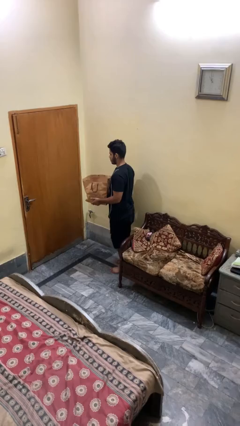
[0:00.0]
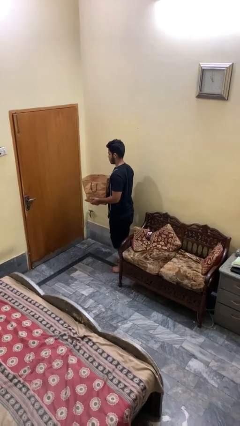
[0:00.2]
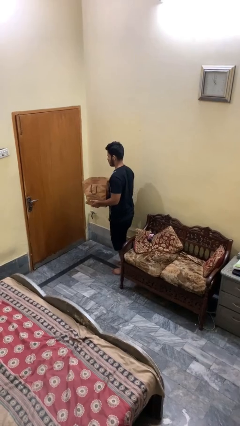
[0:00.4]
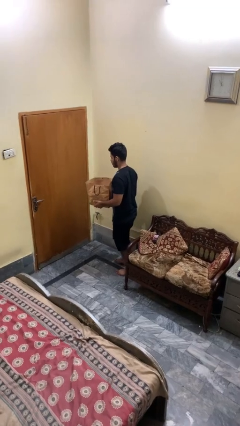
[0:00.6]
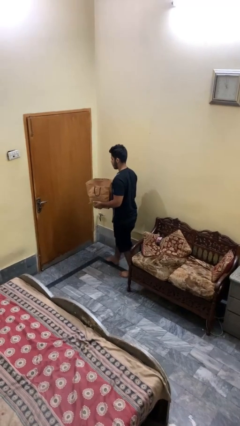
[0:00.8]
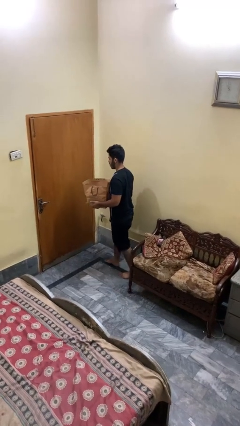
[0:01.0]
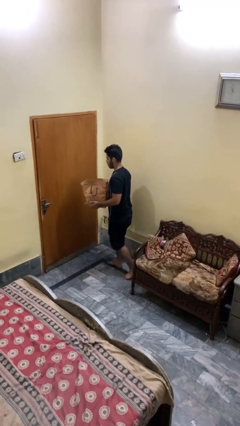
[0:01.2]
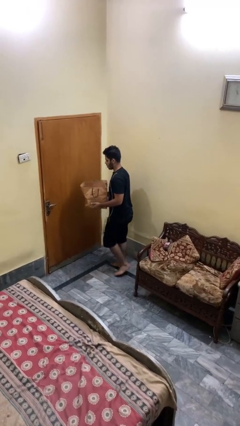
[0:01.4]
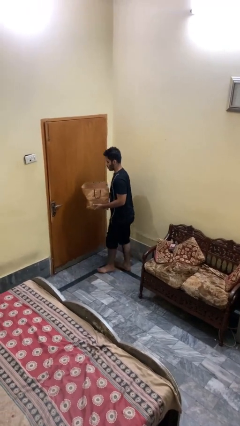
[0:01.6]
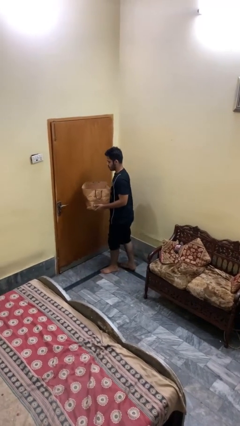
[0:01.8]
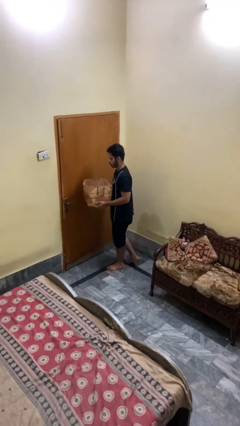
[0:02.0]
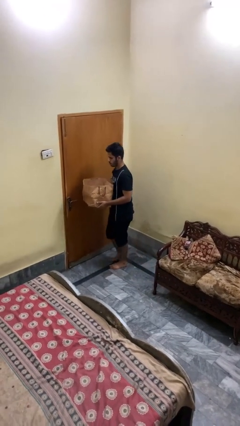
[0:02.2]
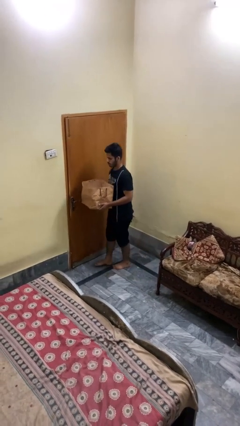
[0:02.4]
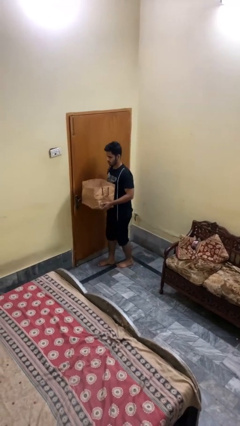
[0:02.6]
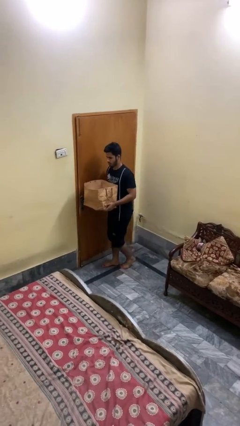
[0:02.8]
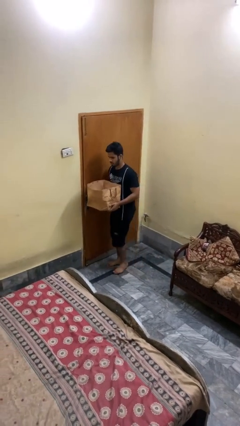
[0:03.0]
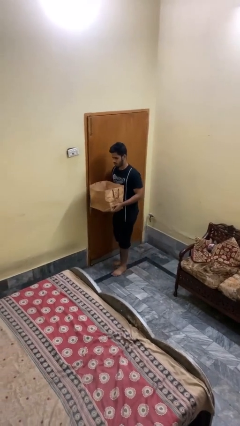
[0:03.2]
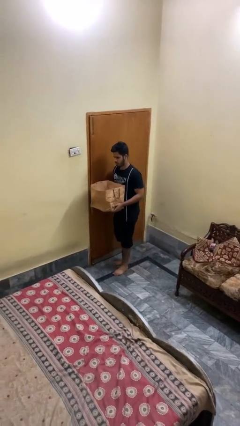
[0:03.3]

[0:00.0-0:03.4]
person carries groceries

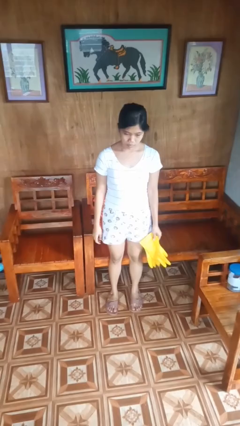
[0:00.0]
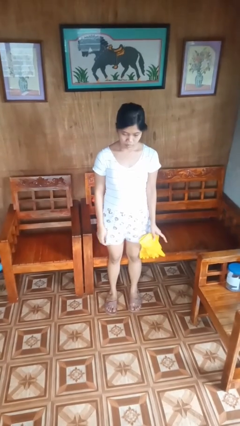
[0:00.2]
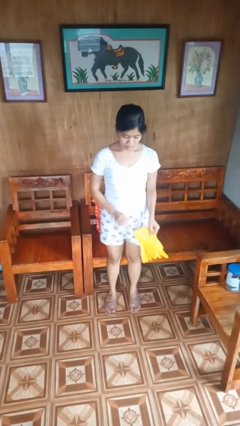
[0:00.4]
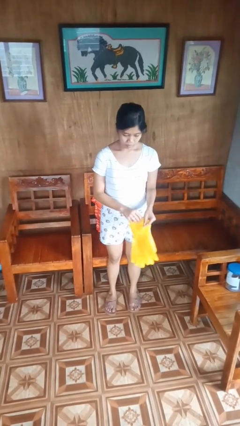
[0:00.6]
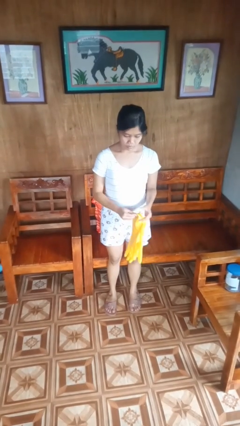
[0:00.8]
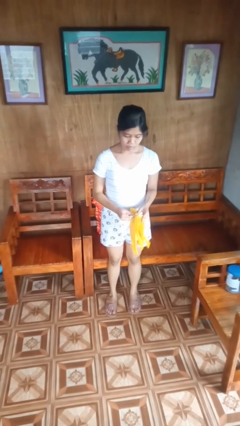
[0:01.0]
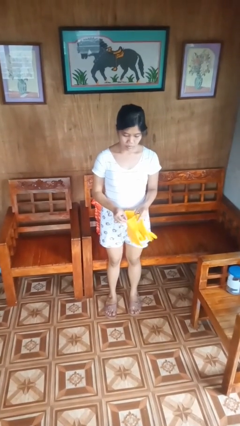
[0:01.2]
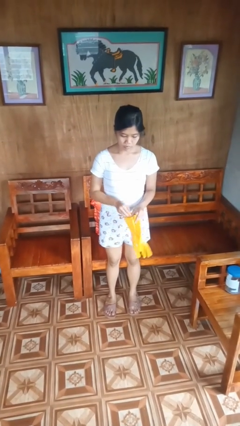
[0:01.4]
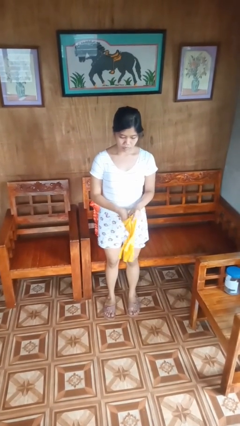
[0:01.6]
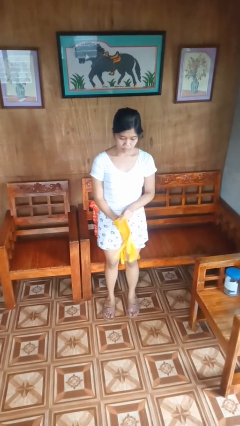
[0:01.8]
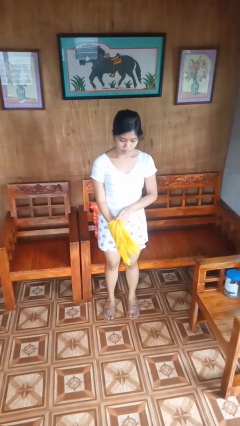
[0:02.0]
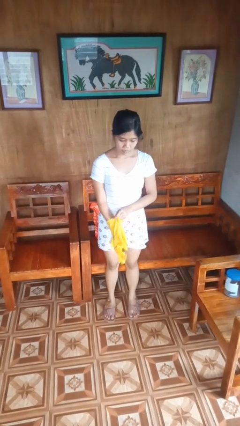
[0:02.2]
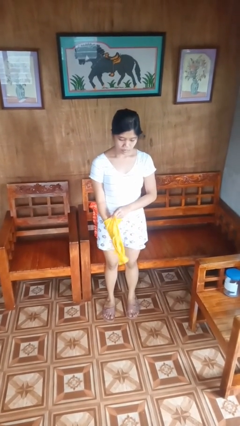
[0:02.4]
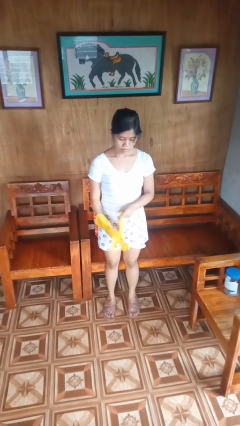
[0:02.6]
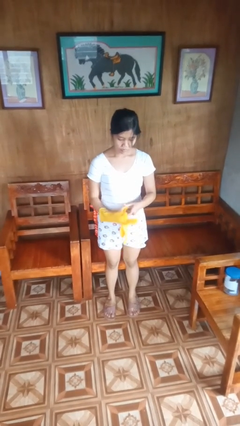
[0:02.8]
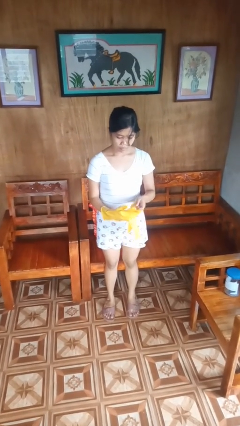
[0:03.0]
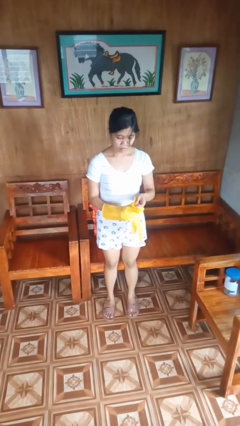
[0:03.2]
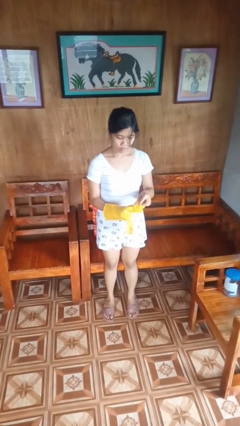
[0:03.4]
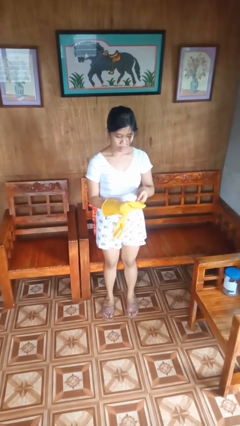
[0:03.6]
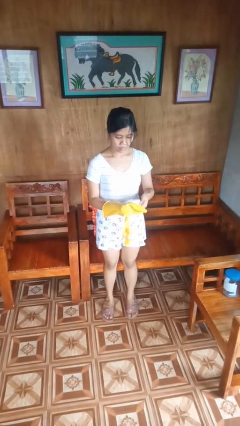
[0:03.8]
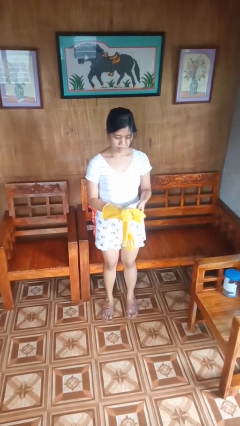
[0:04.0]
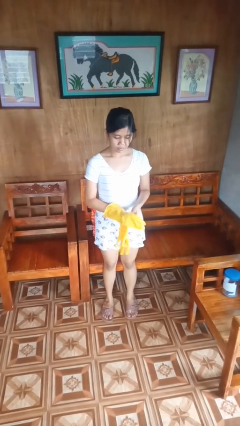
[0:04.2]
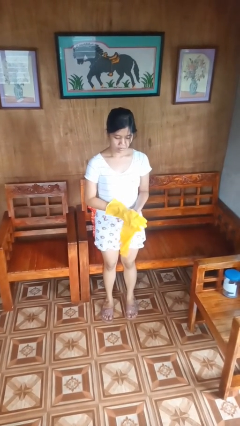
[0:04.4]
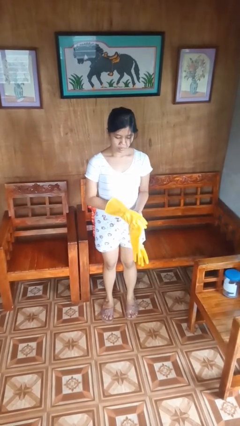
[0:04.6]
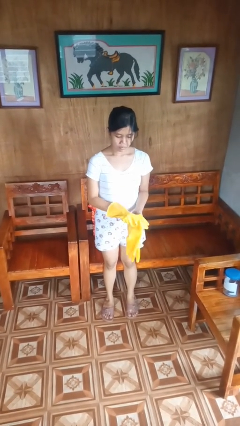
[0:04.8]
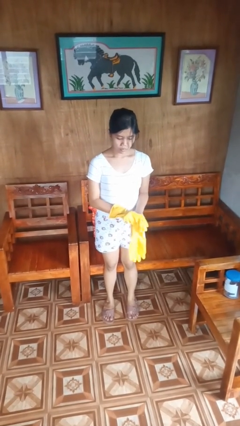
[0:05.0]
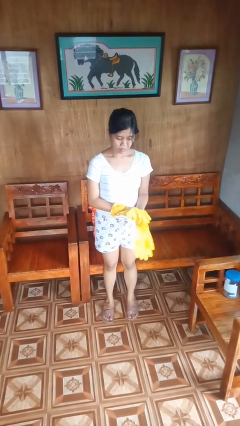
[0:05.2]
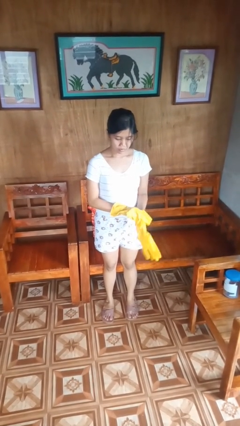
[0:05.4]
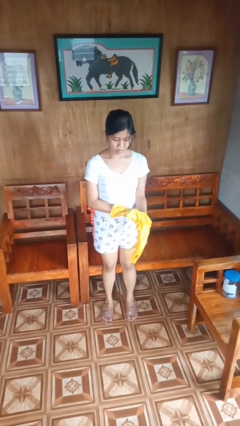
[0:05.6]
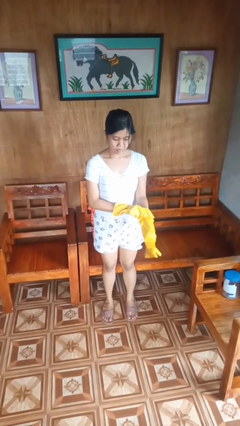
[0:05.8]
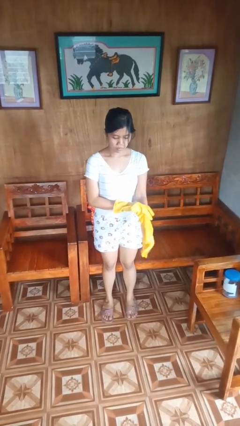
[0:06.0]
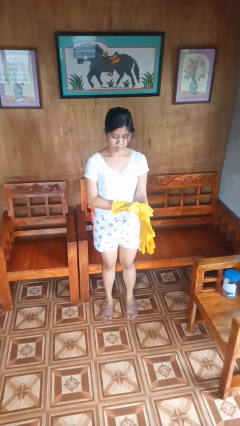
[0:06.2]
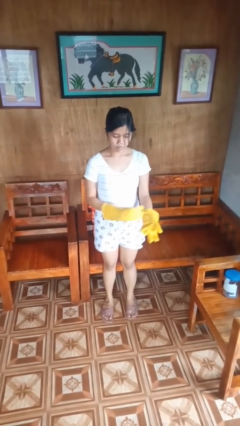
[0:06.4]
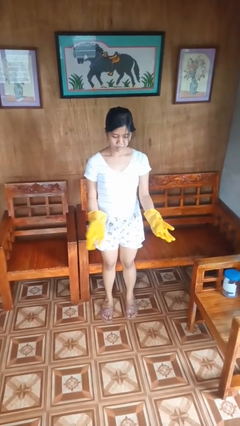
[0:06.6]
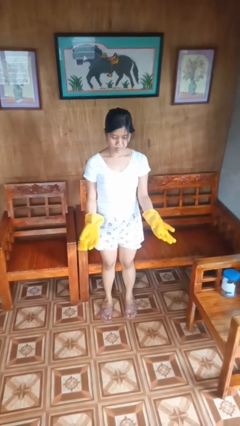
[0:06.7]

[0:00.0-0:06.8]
person puts on gloves

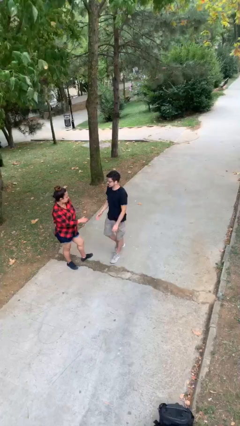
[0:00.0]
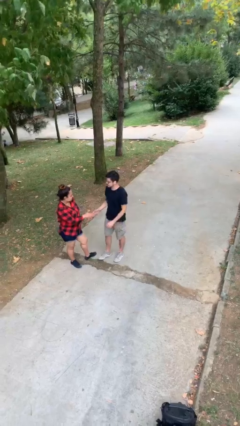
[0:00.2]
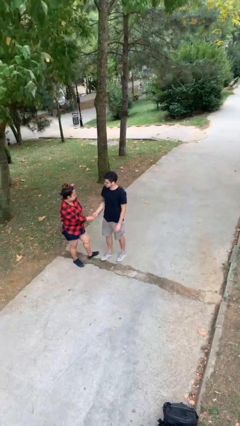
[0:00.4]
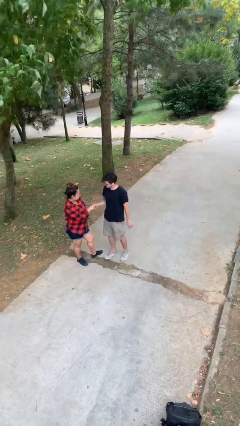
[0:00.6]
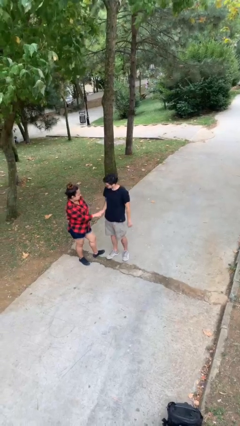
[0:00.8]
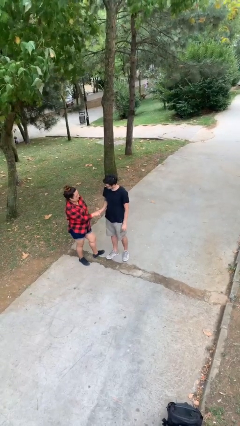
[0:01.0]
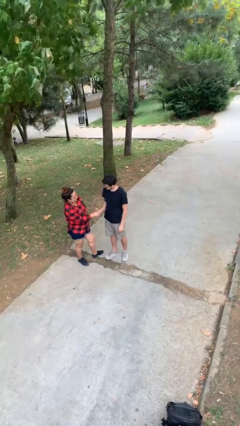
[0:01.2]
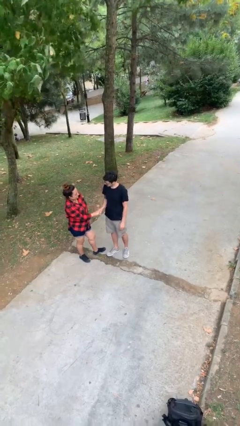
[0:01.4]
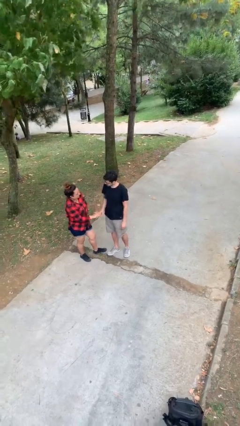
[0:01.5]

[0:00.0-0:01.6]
person shakes hand

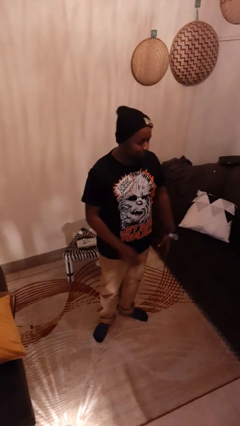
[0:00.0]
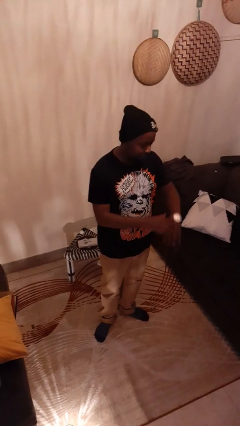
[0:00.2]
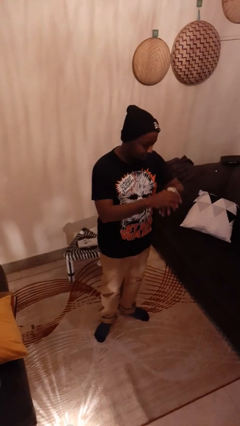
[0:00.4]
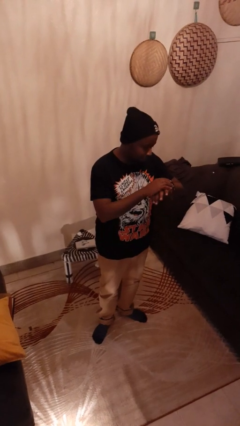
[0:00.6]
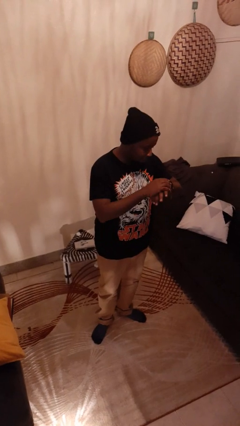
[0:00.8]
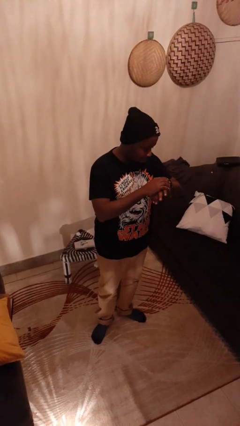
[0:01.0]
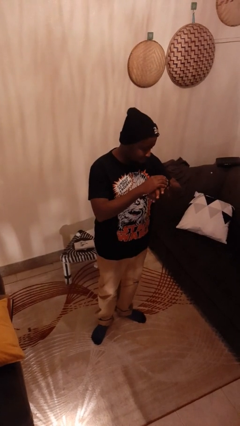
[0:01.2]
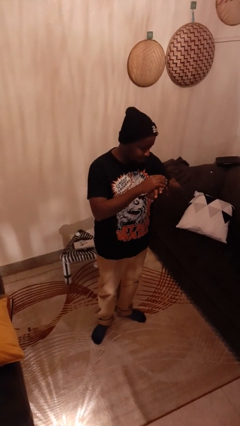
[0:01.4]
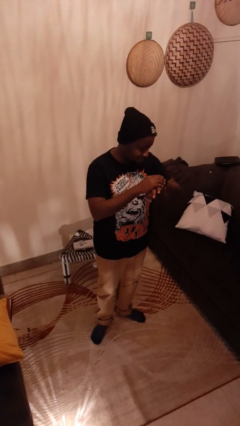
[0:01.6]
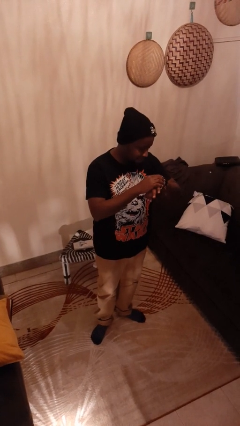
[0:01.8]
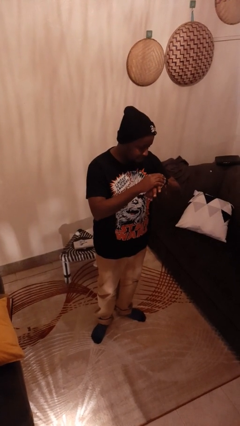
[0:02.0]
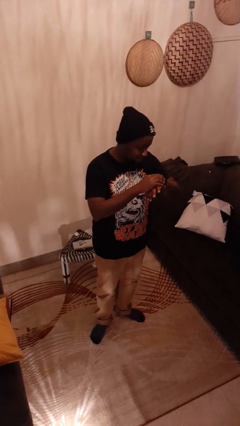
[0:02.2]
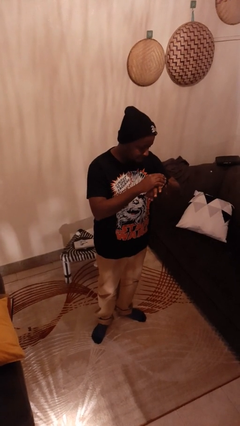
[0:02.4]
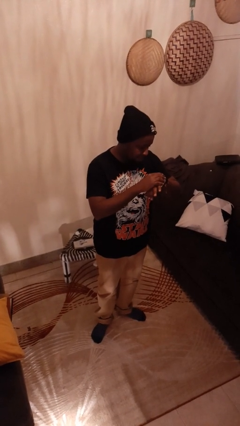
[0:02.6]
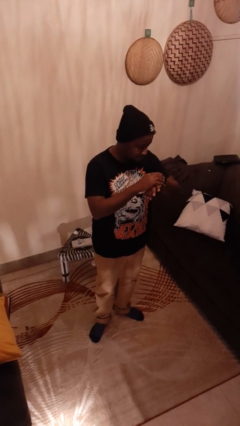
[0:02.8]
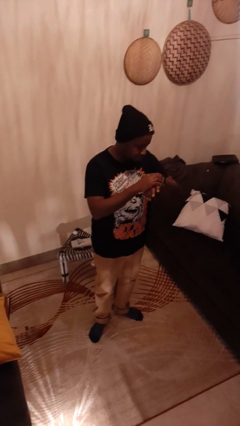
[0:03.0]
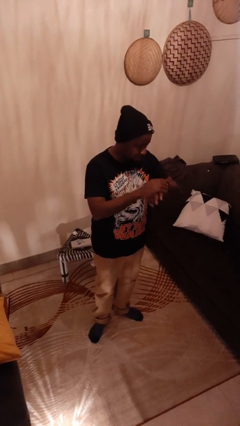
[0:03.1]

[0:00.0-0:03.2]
person looks at wristwatch

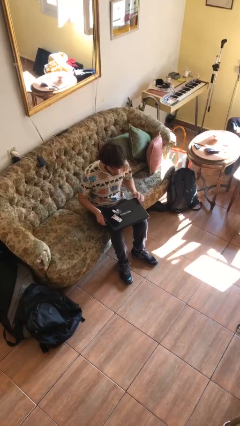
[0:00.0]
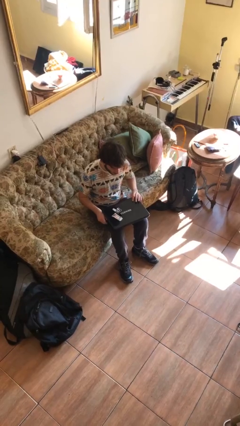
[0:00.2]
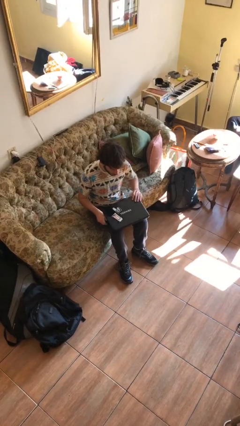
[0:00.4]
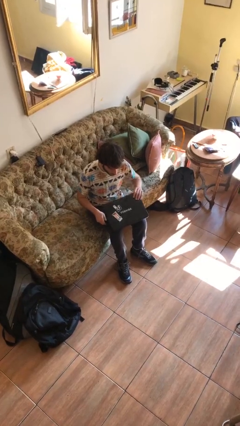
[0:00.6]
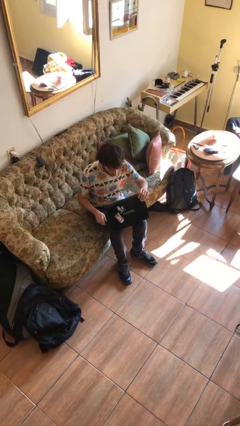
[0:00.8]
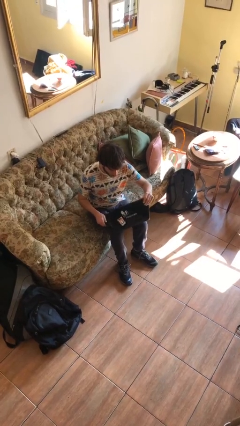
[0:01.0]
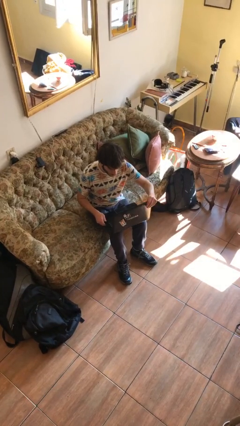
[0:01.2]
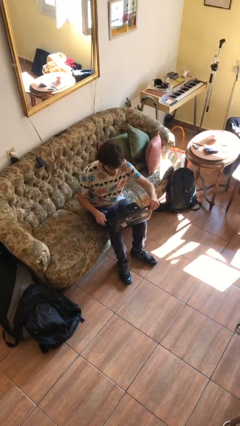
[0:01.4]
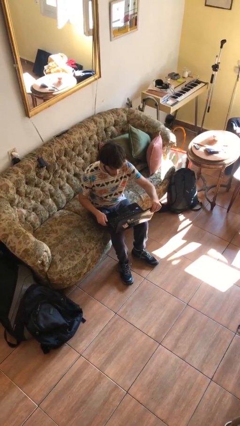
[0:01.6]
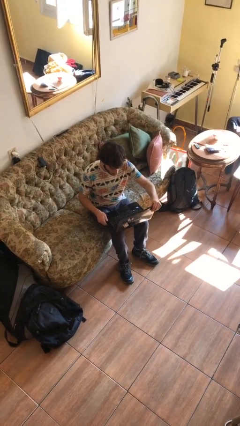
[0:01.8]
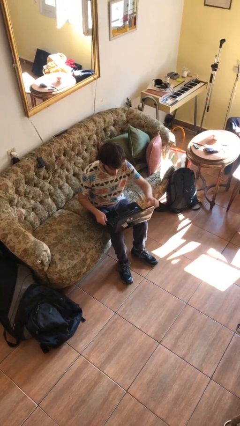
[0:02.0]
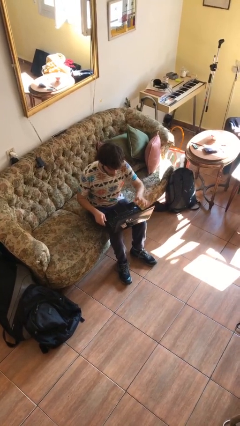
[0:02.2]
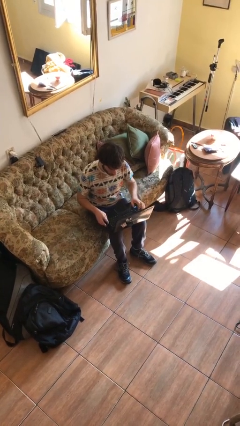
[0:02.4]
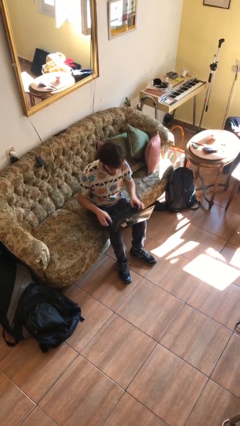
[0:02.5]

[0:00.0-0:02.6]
person opens laptop

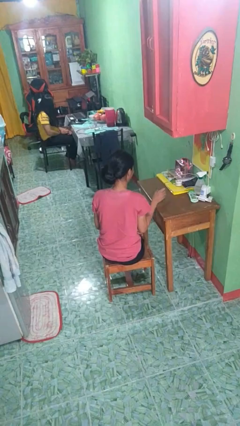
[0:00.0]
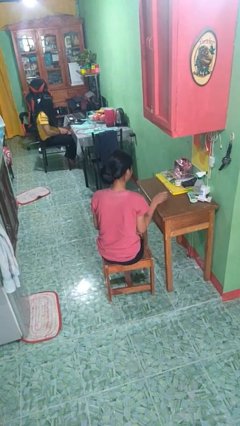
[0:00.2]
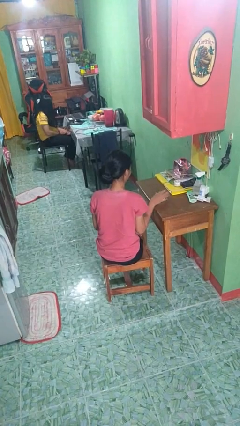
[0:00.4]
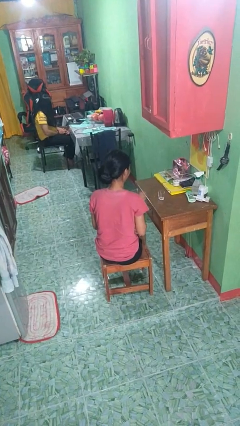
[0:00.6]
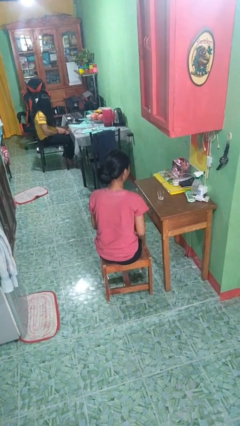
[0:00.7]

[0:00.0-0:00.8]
person puts down object on table
